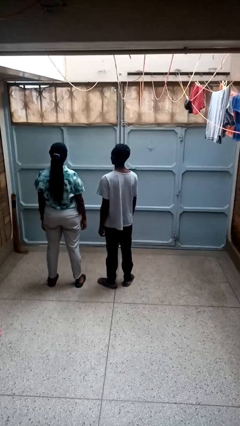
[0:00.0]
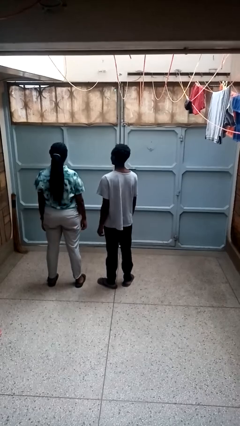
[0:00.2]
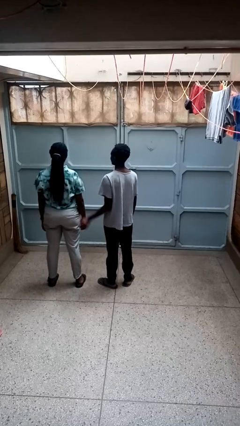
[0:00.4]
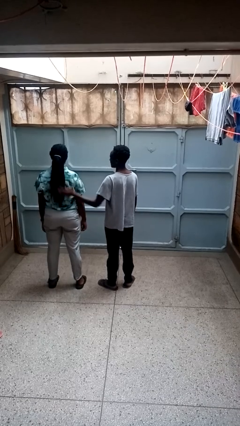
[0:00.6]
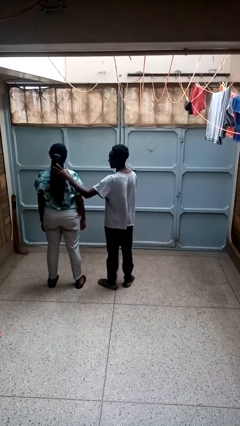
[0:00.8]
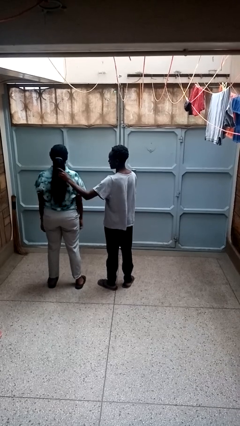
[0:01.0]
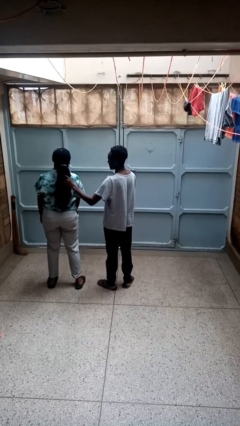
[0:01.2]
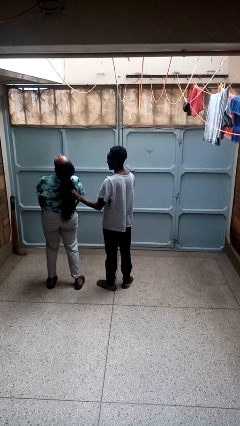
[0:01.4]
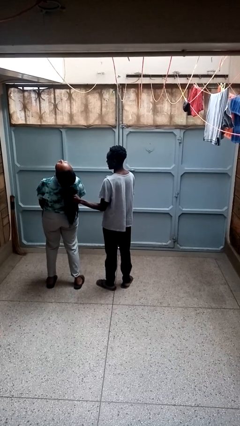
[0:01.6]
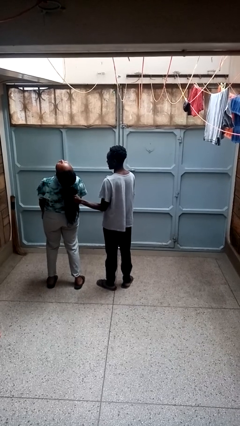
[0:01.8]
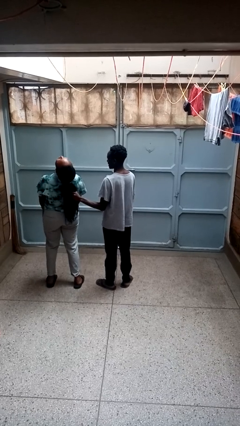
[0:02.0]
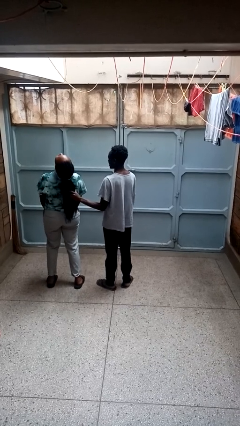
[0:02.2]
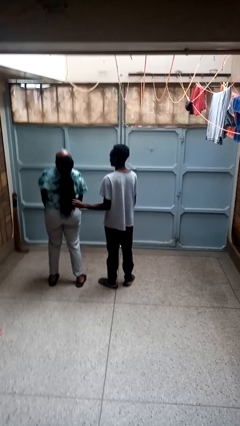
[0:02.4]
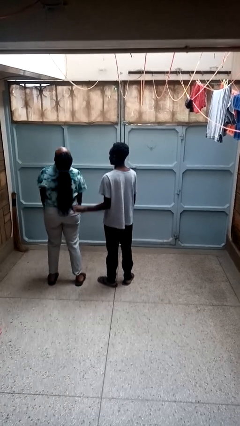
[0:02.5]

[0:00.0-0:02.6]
person grabs person by hair

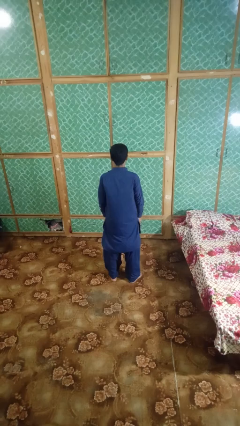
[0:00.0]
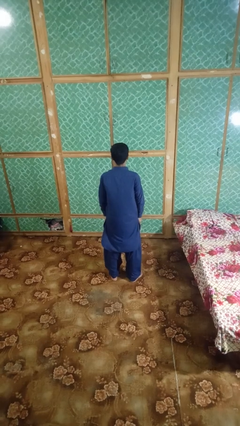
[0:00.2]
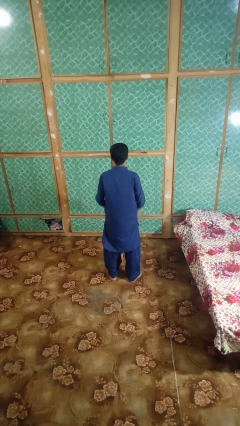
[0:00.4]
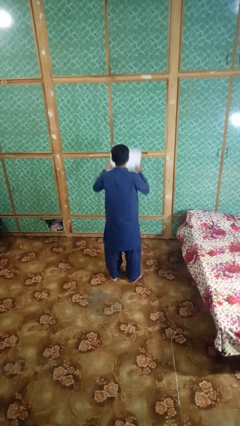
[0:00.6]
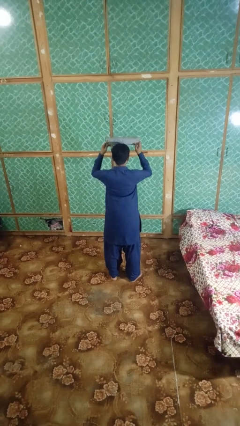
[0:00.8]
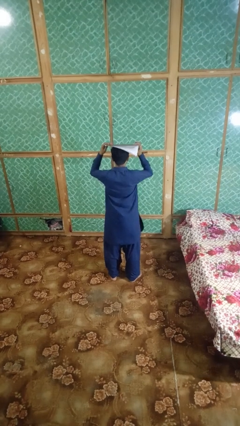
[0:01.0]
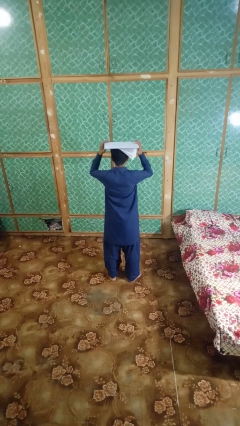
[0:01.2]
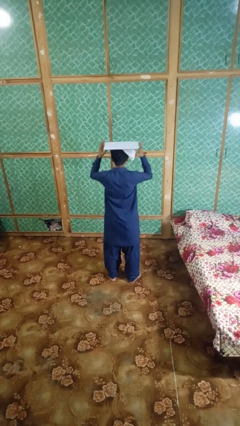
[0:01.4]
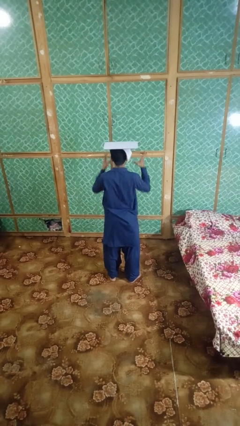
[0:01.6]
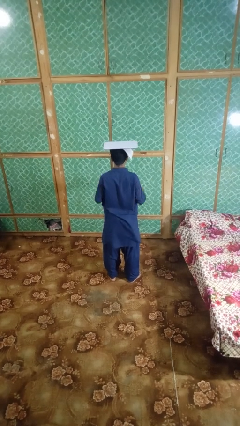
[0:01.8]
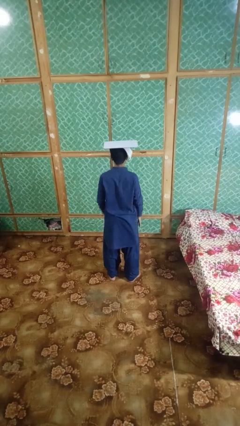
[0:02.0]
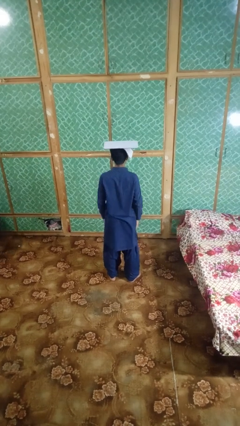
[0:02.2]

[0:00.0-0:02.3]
person holds object above head

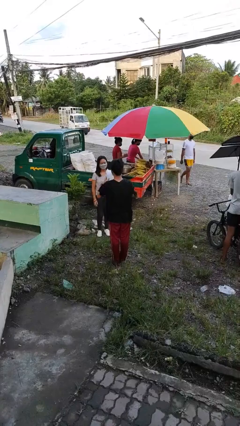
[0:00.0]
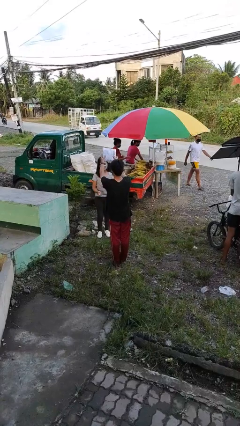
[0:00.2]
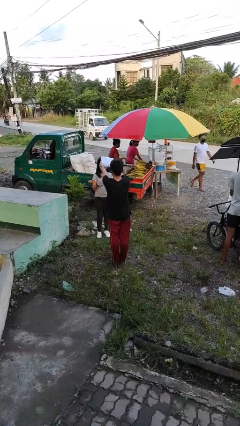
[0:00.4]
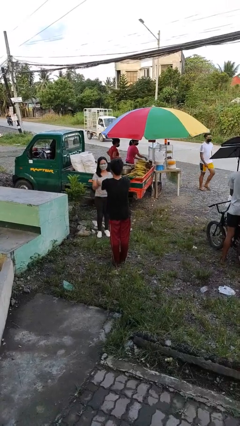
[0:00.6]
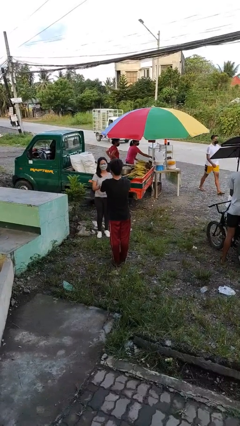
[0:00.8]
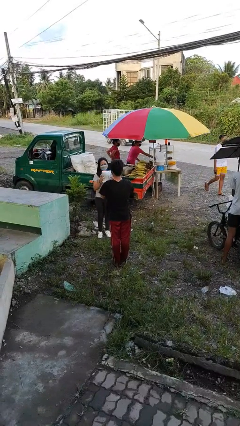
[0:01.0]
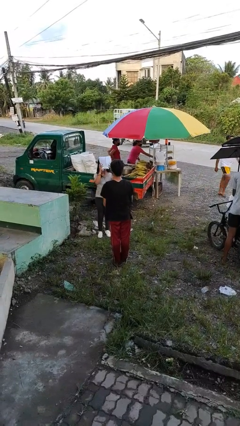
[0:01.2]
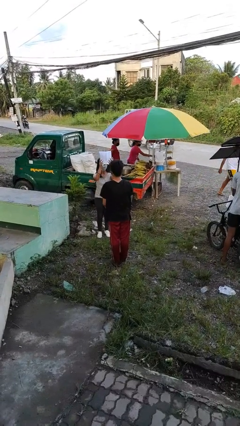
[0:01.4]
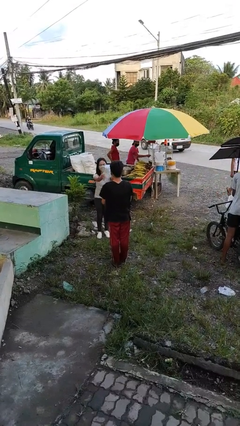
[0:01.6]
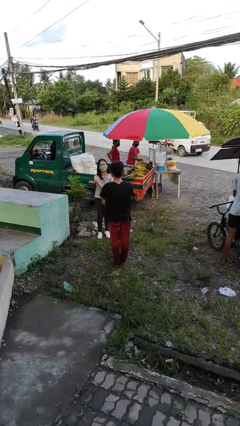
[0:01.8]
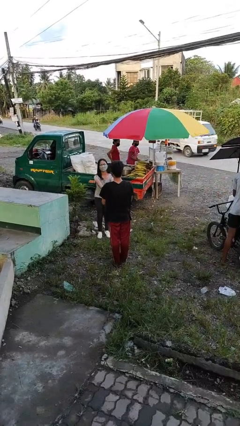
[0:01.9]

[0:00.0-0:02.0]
person transfers object to person

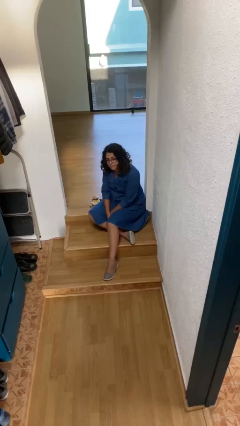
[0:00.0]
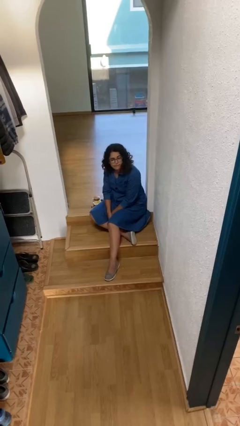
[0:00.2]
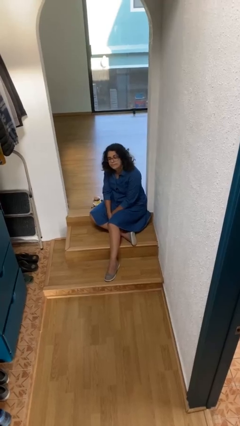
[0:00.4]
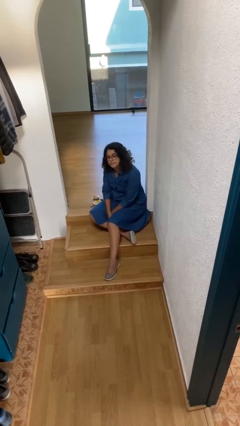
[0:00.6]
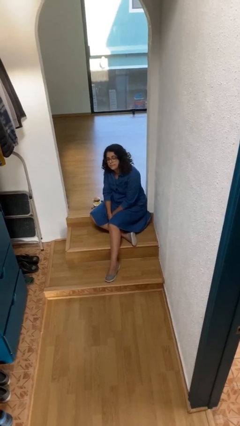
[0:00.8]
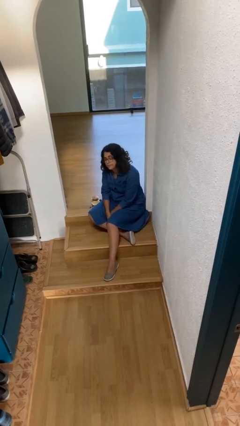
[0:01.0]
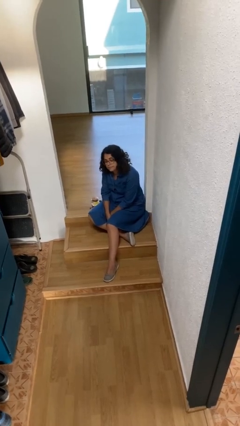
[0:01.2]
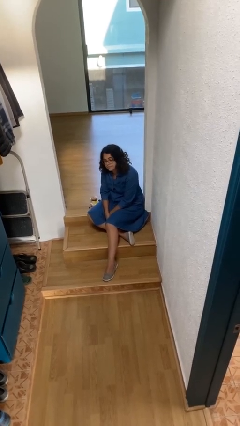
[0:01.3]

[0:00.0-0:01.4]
person shakes head

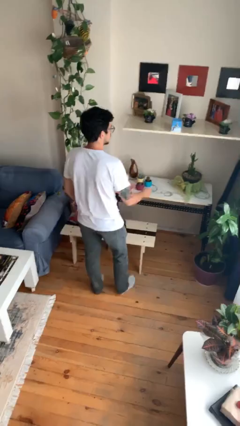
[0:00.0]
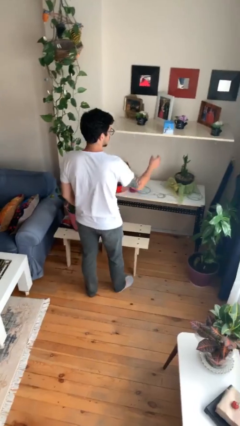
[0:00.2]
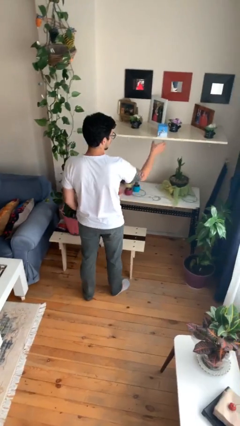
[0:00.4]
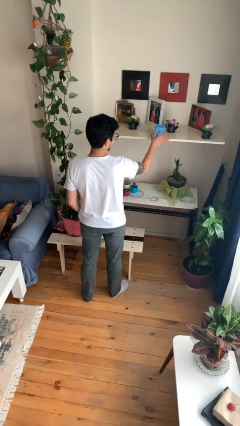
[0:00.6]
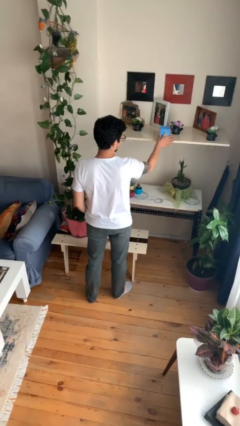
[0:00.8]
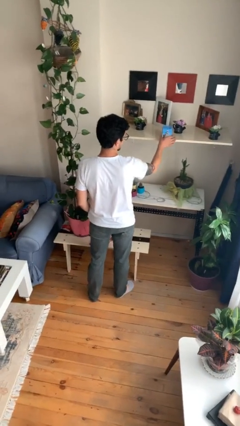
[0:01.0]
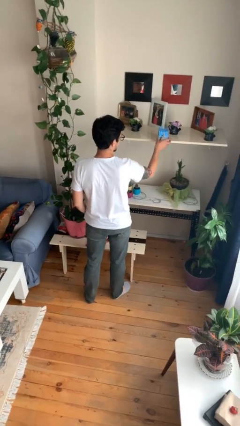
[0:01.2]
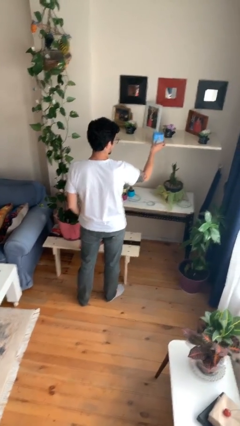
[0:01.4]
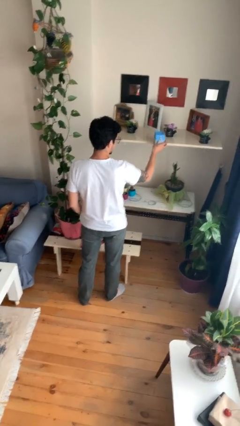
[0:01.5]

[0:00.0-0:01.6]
person picks up object from shelf

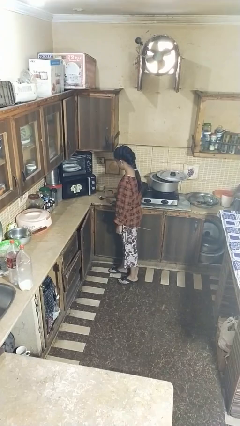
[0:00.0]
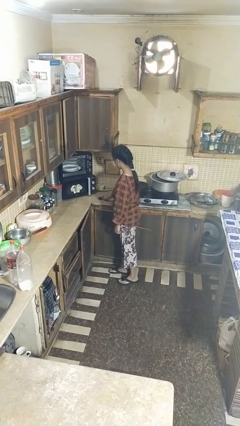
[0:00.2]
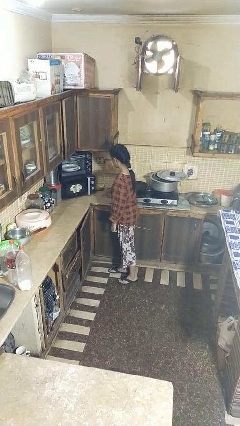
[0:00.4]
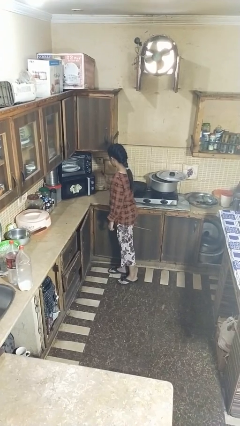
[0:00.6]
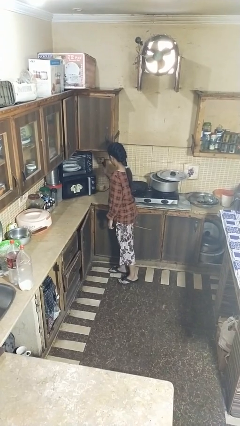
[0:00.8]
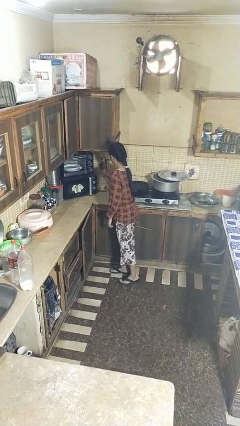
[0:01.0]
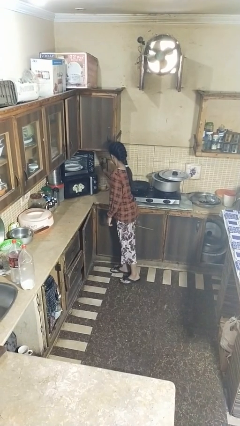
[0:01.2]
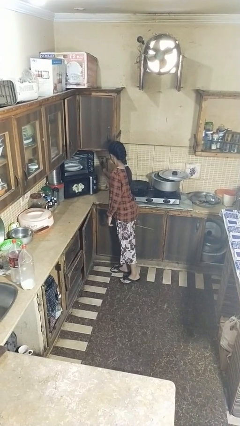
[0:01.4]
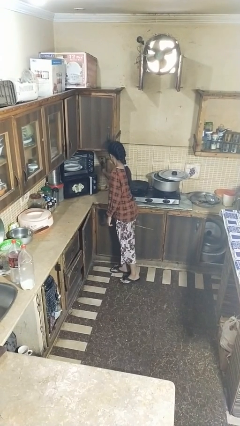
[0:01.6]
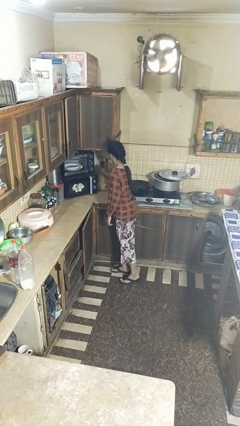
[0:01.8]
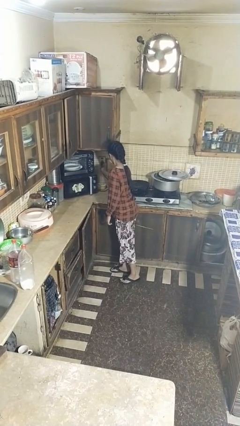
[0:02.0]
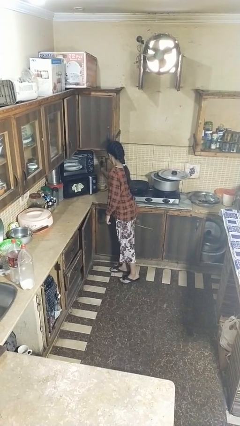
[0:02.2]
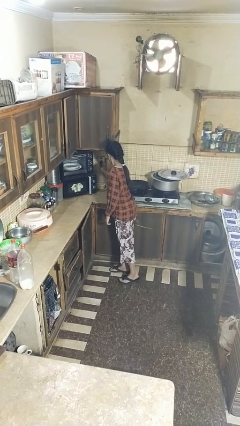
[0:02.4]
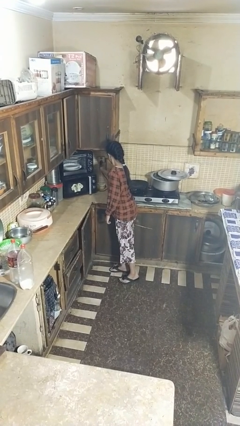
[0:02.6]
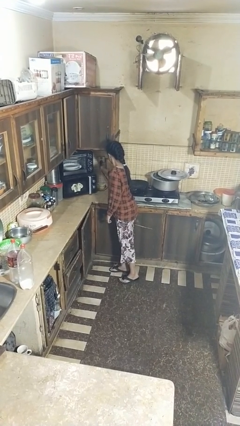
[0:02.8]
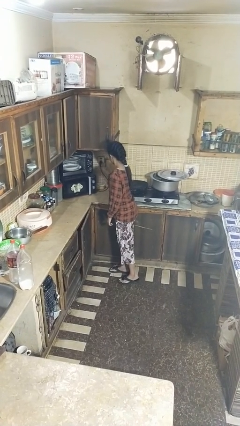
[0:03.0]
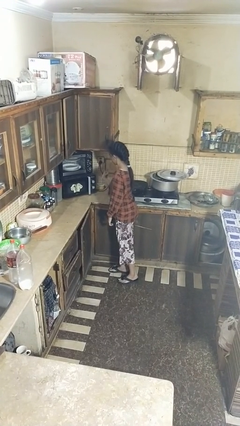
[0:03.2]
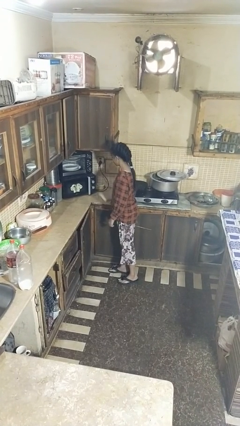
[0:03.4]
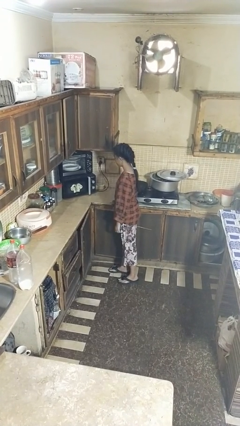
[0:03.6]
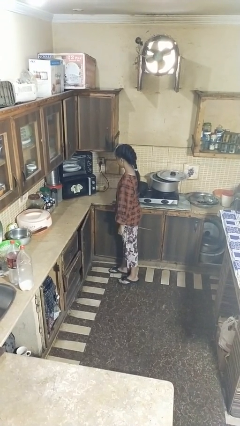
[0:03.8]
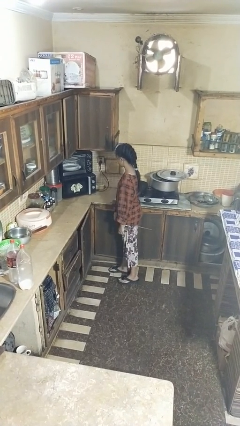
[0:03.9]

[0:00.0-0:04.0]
person plugs into electrical socket

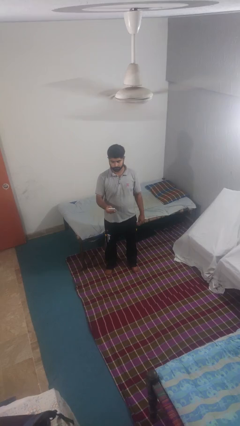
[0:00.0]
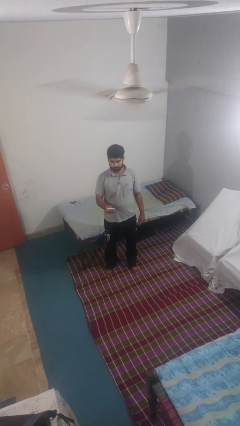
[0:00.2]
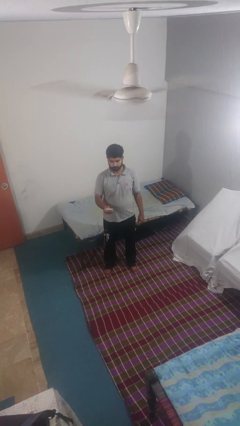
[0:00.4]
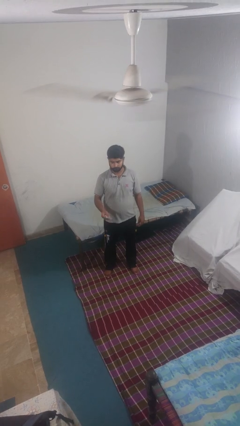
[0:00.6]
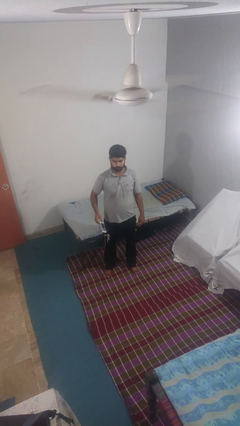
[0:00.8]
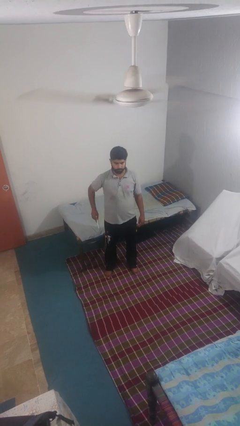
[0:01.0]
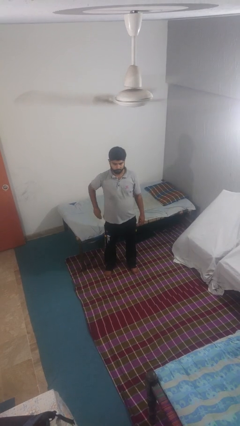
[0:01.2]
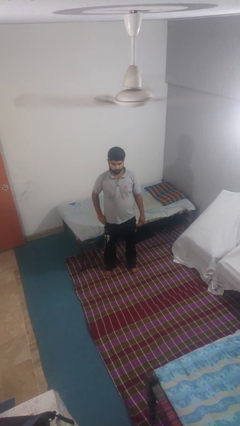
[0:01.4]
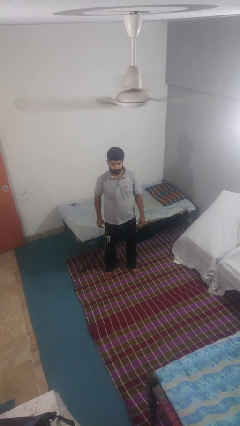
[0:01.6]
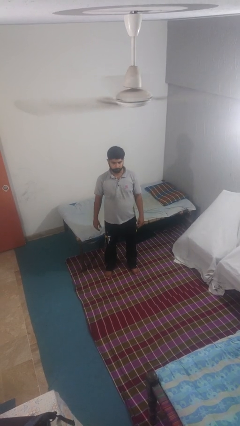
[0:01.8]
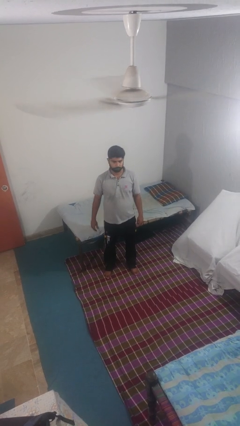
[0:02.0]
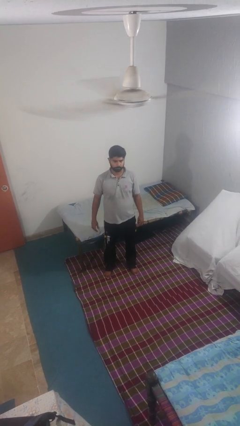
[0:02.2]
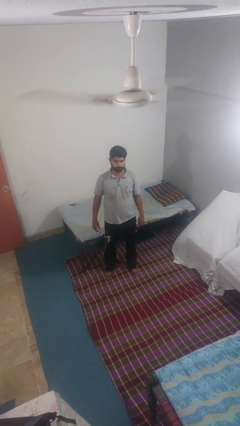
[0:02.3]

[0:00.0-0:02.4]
person puts phone into pocket

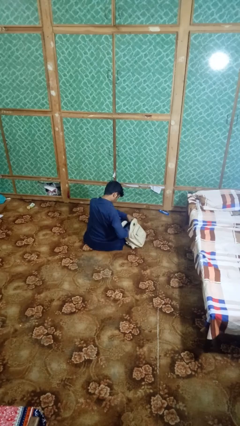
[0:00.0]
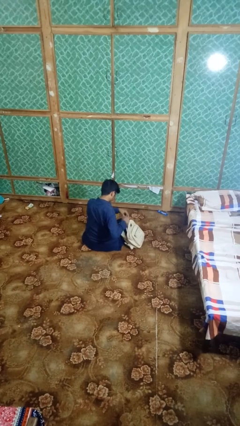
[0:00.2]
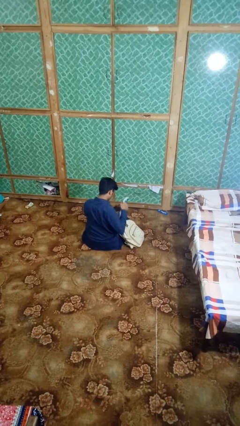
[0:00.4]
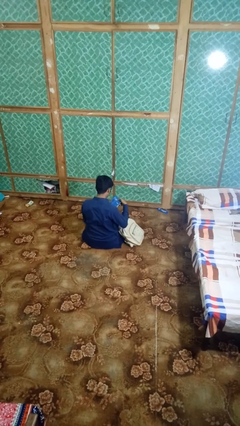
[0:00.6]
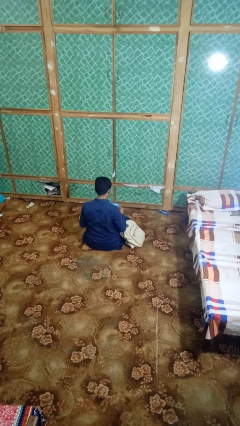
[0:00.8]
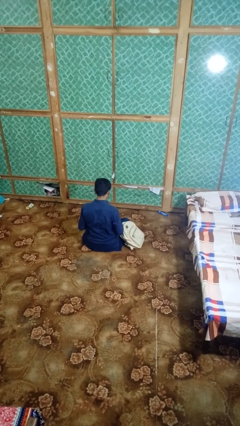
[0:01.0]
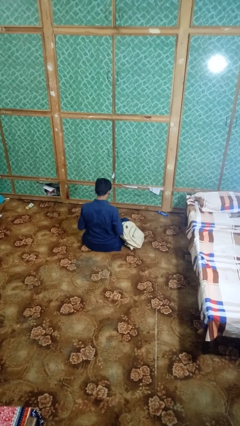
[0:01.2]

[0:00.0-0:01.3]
person takes object from backpack
